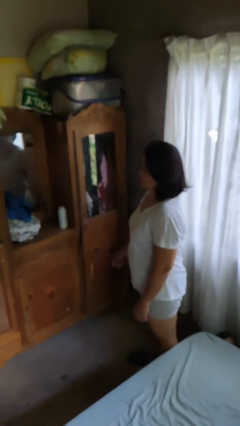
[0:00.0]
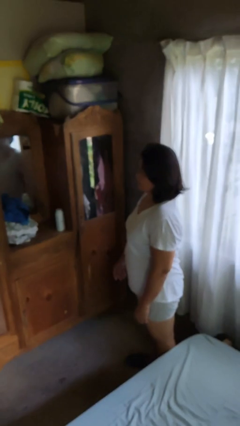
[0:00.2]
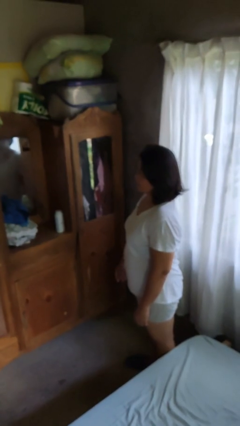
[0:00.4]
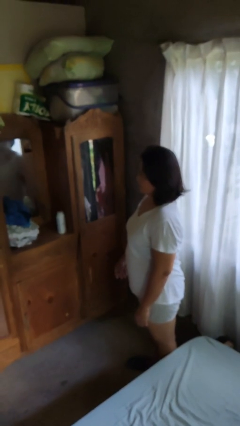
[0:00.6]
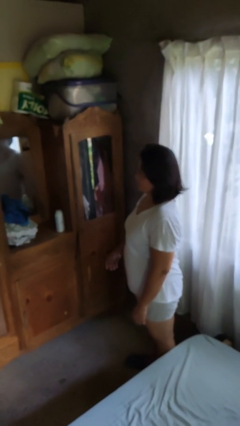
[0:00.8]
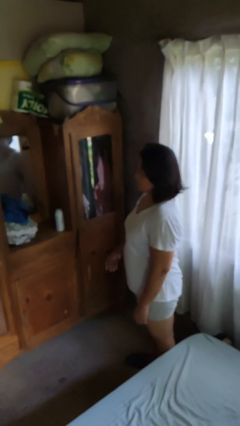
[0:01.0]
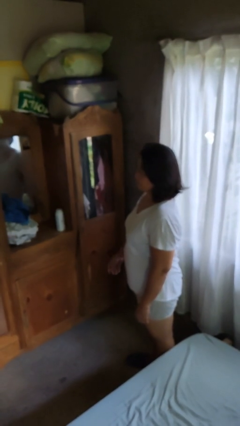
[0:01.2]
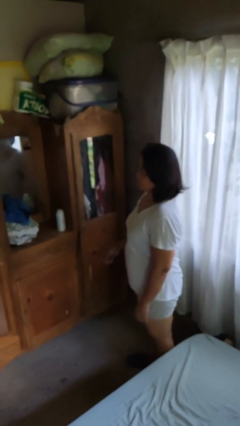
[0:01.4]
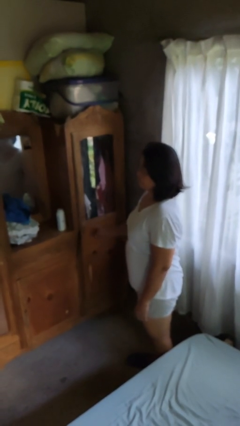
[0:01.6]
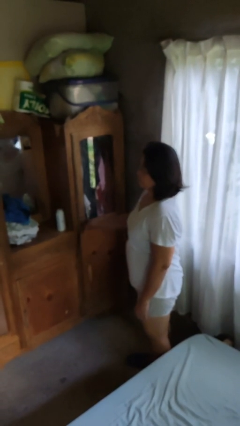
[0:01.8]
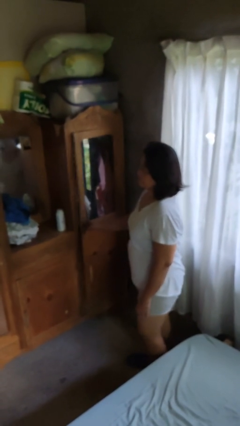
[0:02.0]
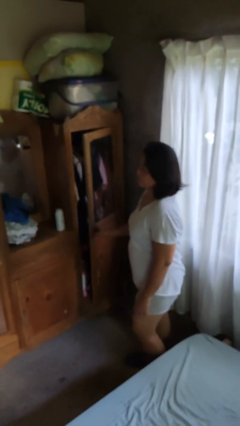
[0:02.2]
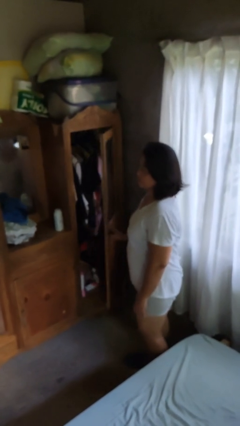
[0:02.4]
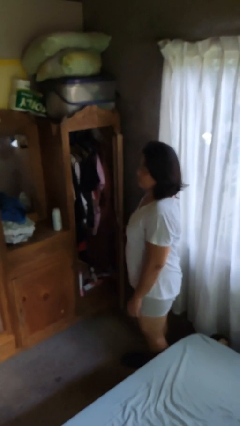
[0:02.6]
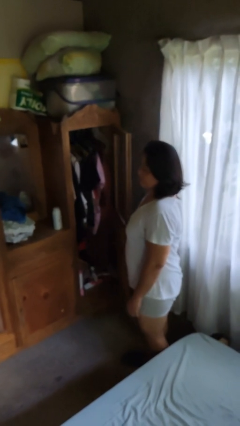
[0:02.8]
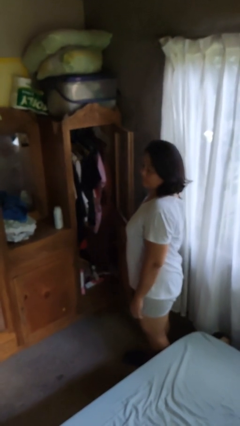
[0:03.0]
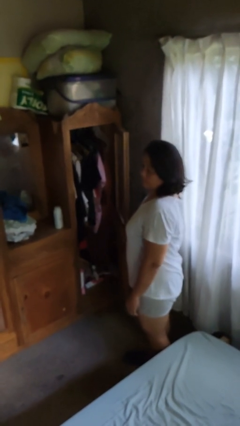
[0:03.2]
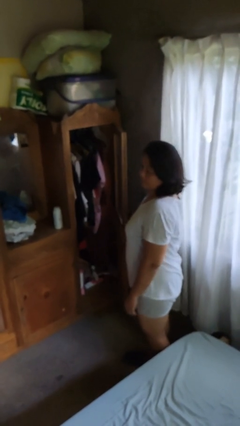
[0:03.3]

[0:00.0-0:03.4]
person opens dresser drawer

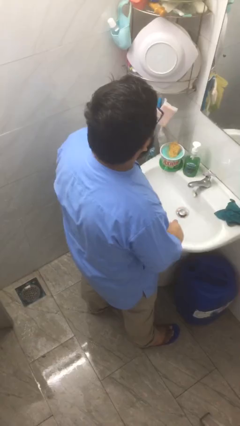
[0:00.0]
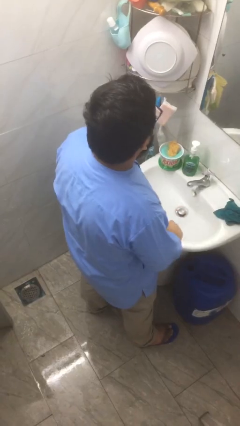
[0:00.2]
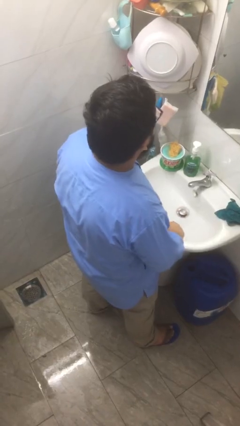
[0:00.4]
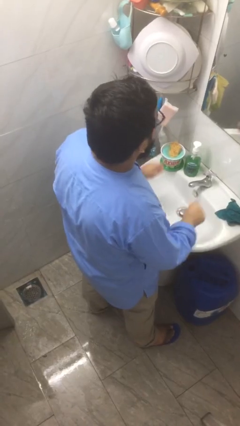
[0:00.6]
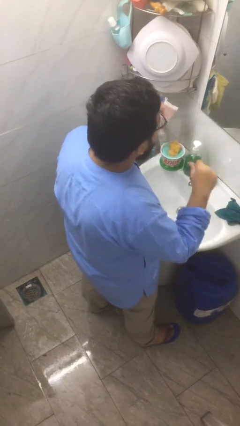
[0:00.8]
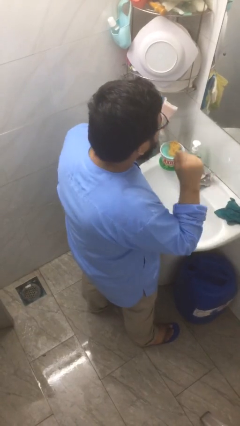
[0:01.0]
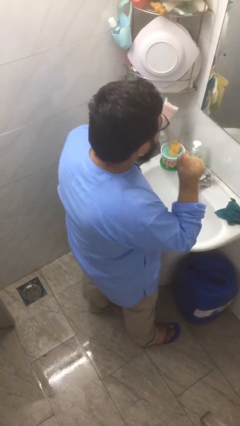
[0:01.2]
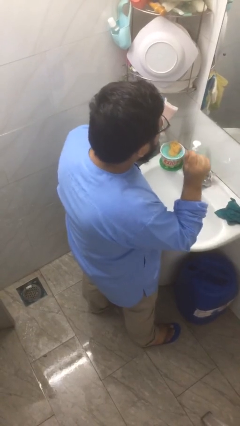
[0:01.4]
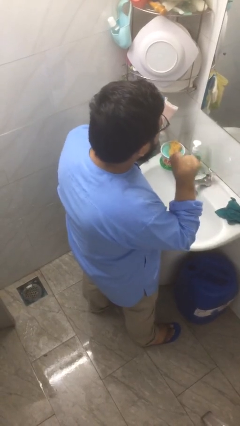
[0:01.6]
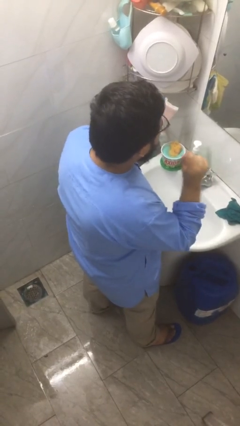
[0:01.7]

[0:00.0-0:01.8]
person flosses

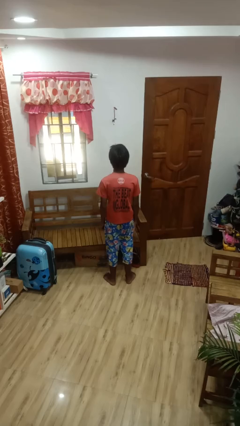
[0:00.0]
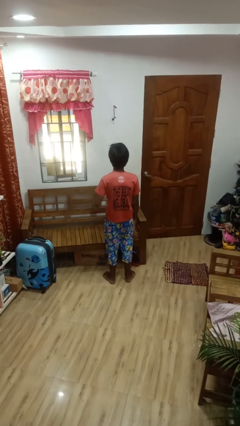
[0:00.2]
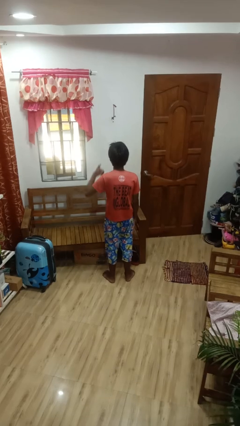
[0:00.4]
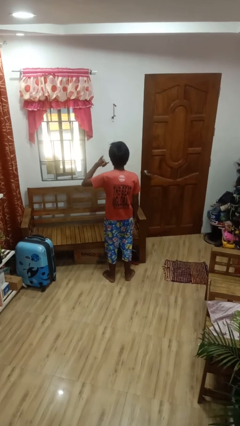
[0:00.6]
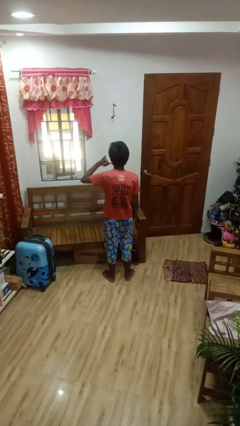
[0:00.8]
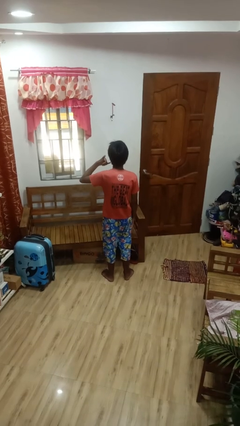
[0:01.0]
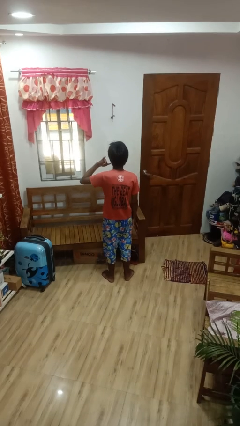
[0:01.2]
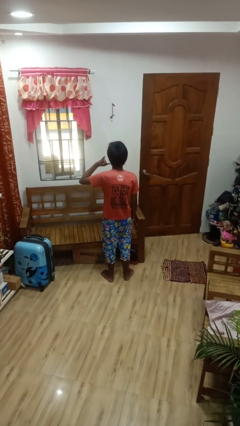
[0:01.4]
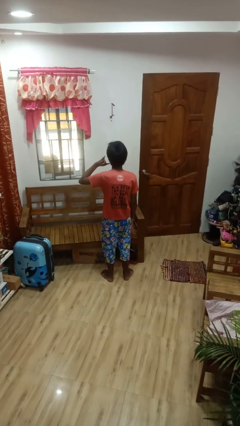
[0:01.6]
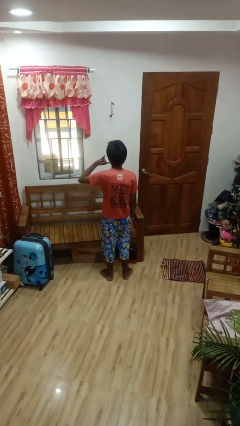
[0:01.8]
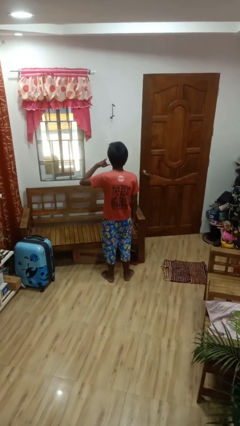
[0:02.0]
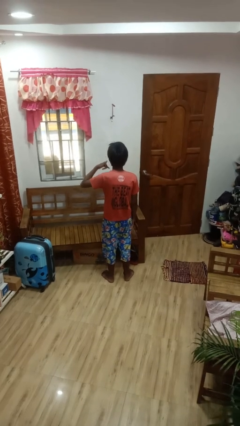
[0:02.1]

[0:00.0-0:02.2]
person gestures call me

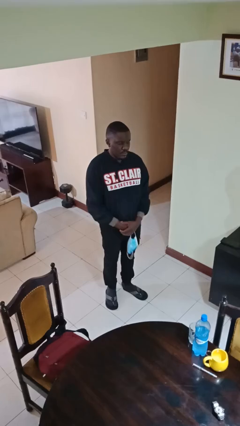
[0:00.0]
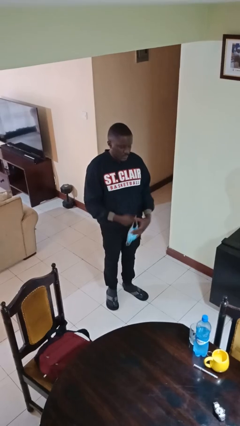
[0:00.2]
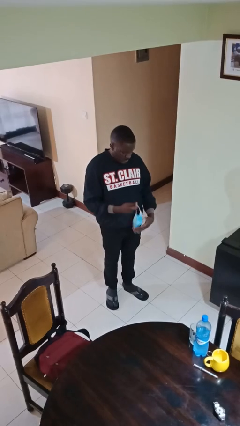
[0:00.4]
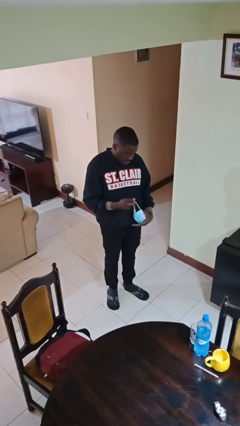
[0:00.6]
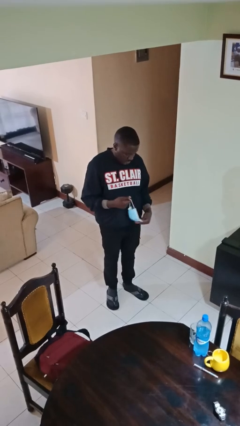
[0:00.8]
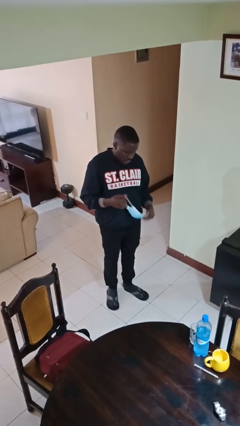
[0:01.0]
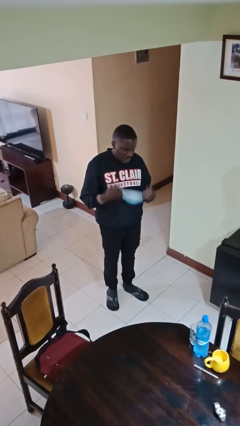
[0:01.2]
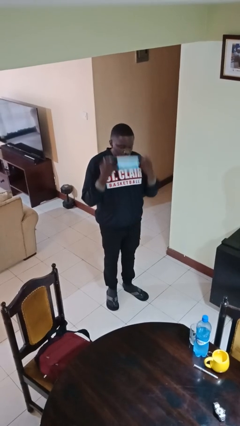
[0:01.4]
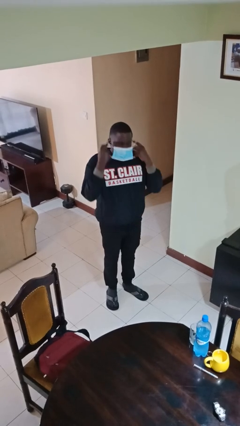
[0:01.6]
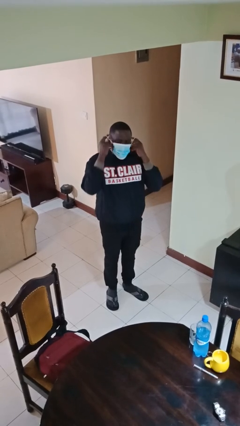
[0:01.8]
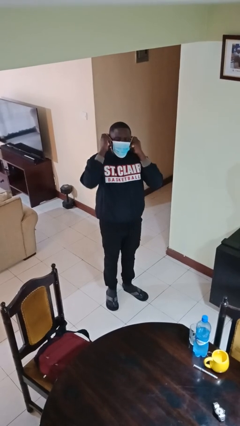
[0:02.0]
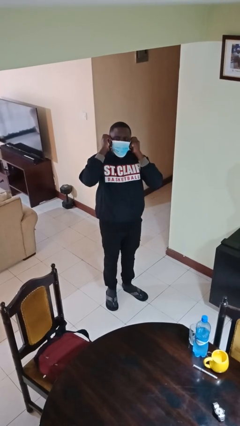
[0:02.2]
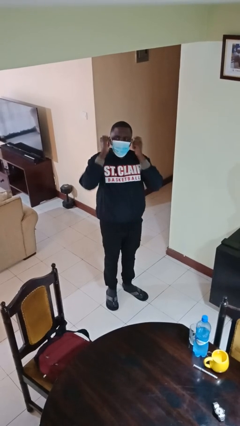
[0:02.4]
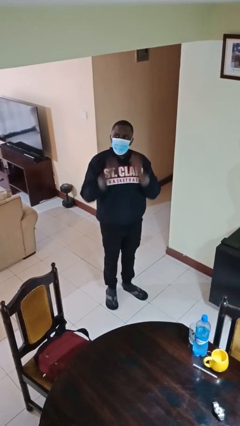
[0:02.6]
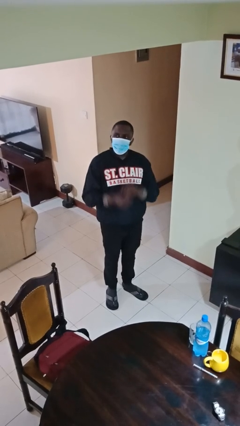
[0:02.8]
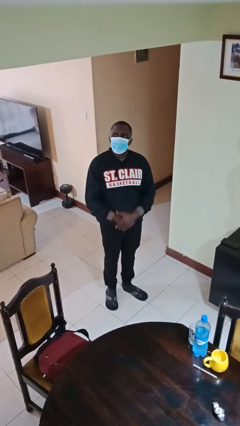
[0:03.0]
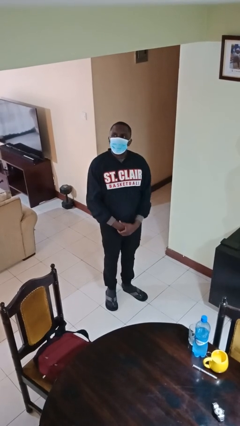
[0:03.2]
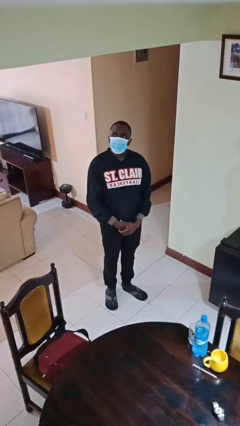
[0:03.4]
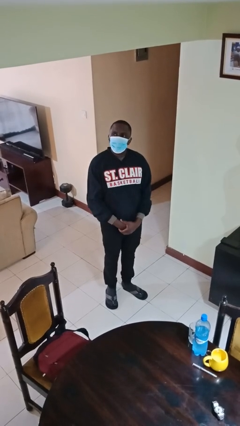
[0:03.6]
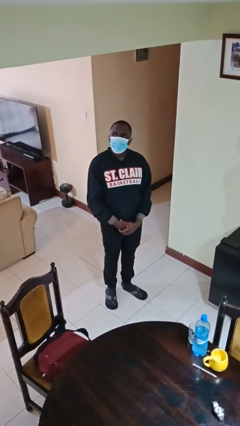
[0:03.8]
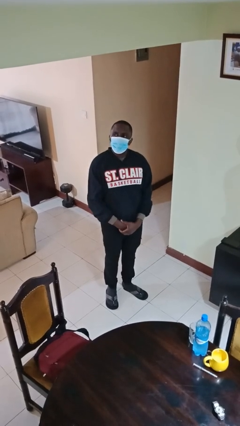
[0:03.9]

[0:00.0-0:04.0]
person puts on facemask

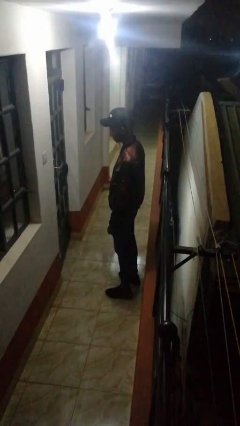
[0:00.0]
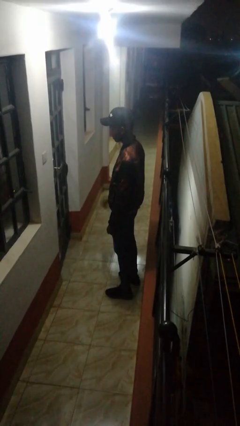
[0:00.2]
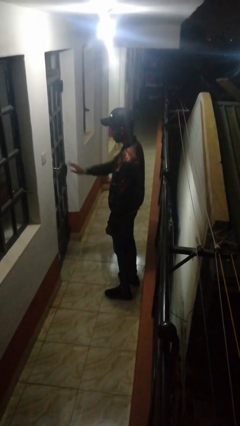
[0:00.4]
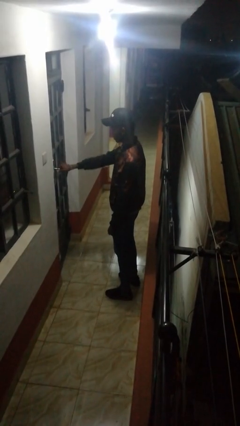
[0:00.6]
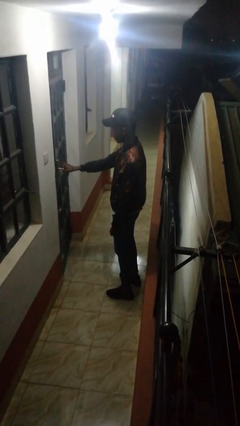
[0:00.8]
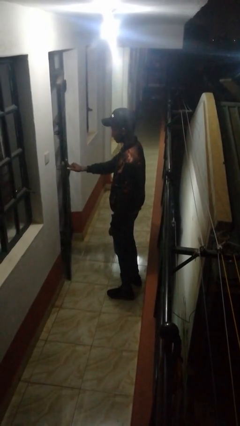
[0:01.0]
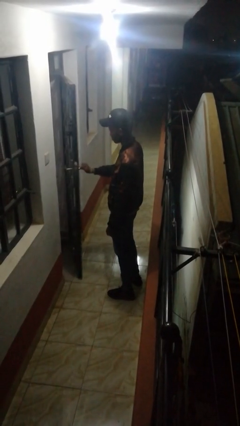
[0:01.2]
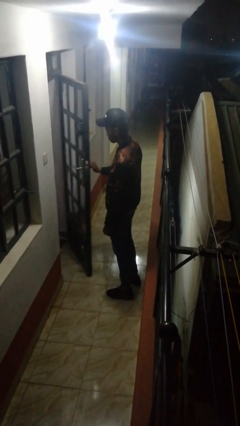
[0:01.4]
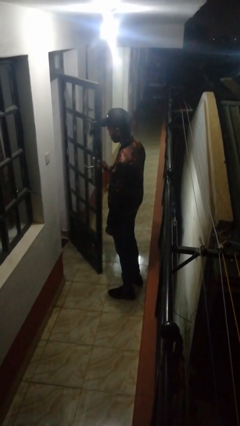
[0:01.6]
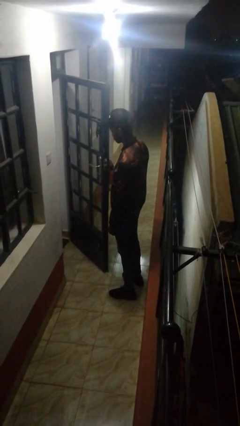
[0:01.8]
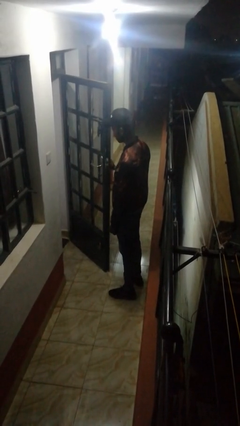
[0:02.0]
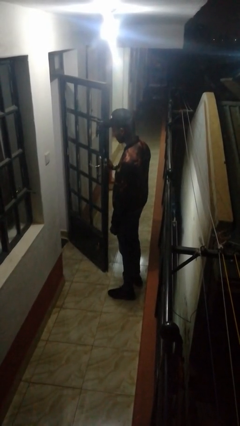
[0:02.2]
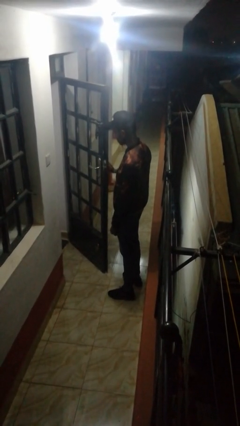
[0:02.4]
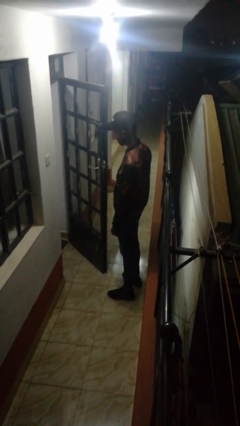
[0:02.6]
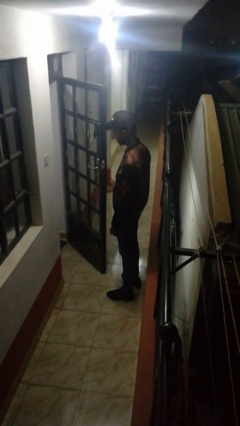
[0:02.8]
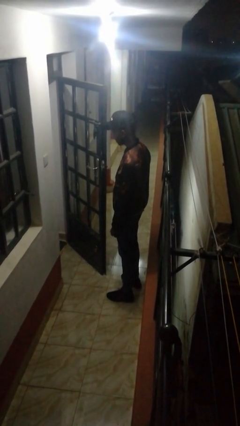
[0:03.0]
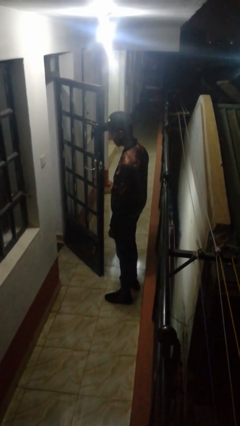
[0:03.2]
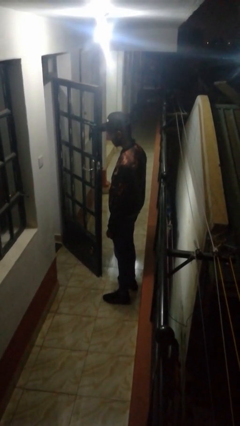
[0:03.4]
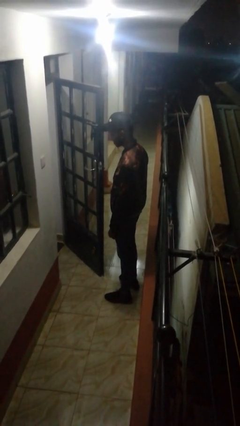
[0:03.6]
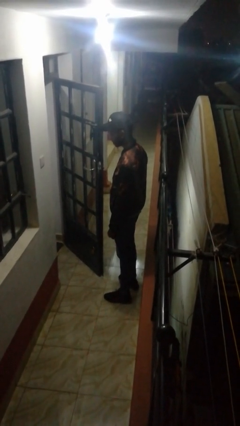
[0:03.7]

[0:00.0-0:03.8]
person opens facility door

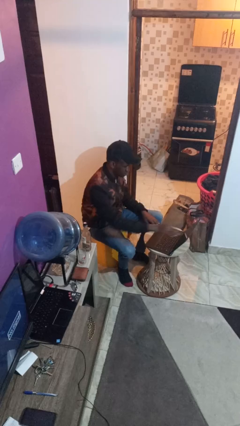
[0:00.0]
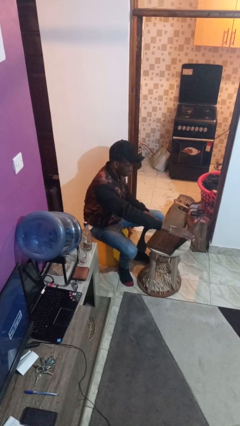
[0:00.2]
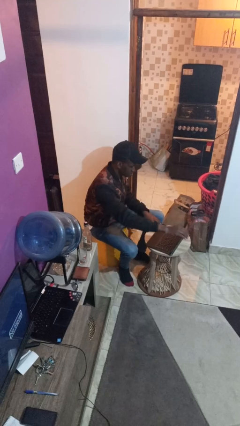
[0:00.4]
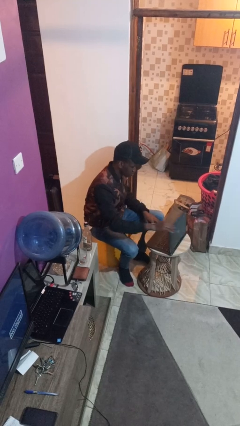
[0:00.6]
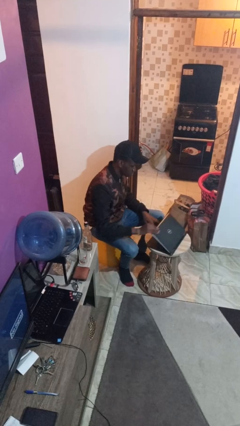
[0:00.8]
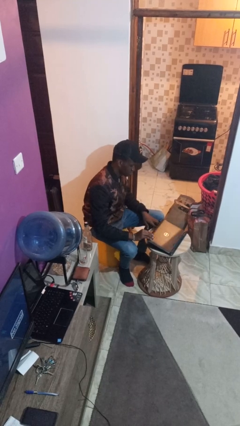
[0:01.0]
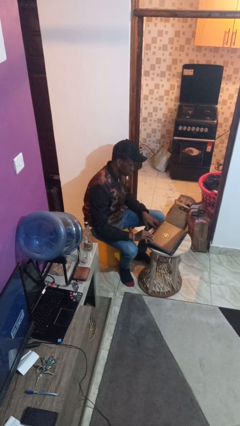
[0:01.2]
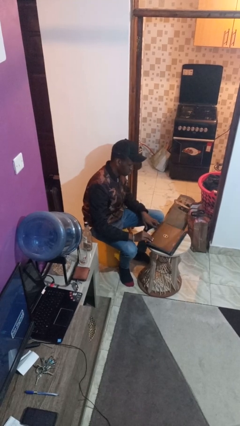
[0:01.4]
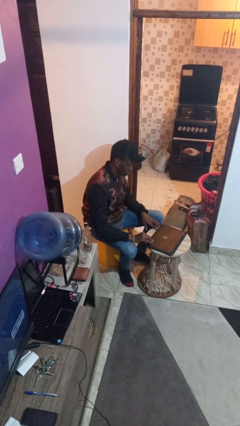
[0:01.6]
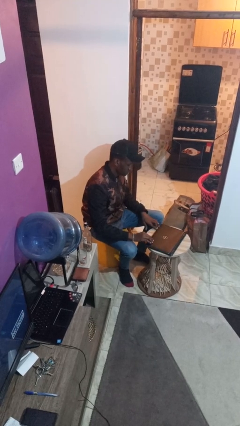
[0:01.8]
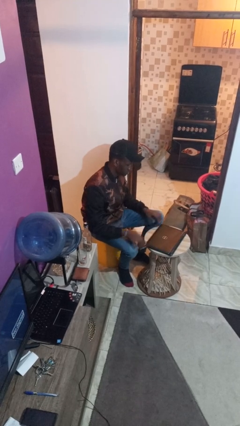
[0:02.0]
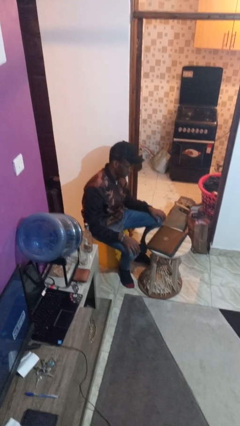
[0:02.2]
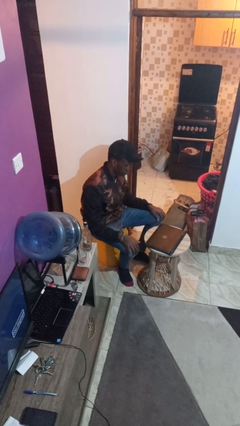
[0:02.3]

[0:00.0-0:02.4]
person closes laptop
